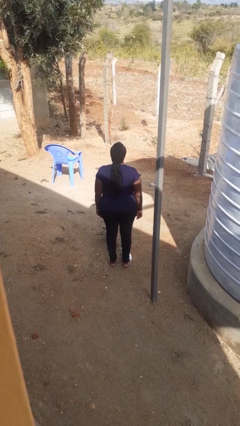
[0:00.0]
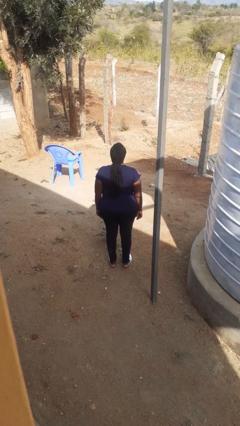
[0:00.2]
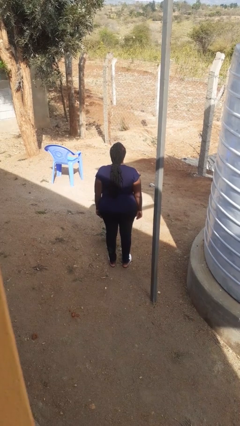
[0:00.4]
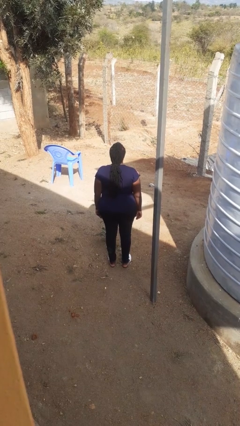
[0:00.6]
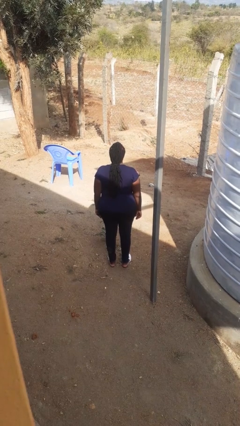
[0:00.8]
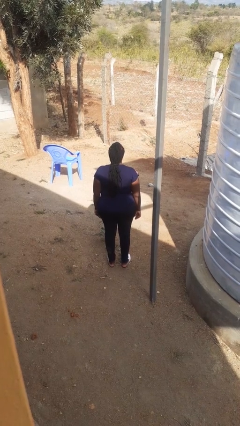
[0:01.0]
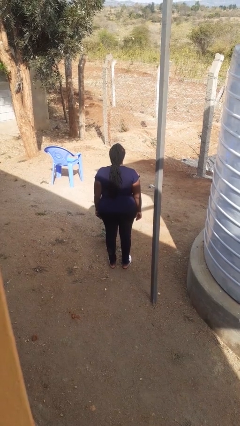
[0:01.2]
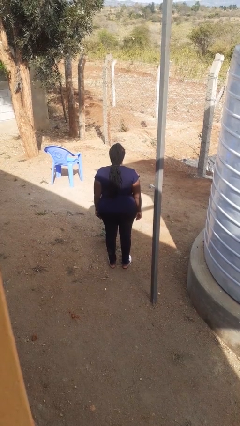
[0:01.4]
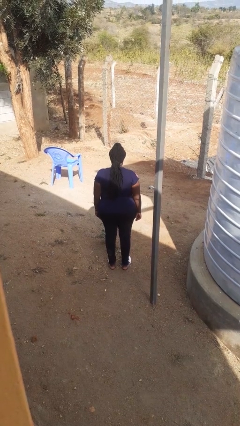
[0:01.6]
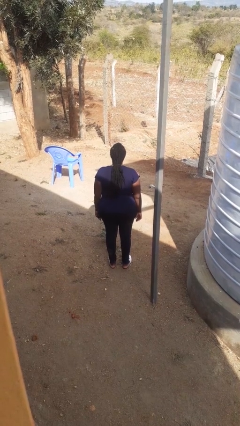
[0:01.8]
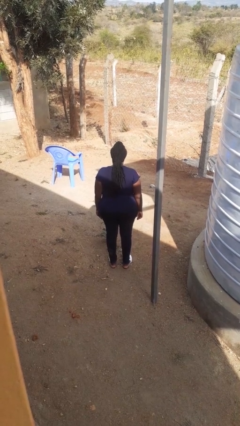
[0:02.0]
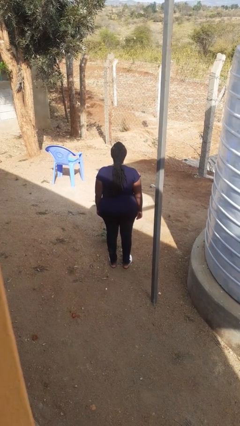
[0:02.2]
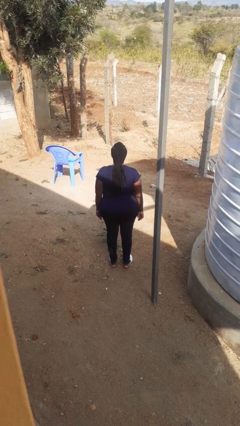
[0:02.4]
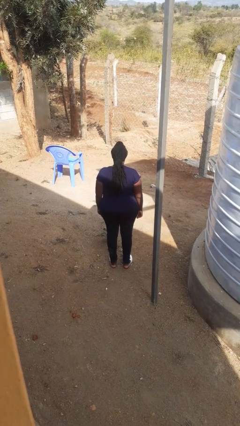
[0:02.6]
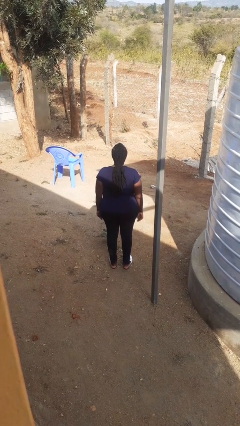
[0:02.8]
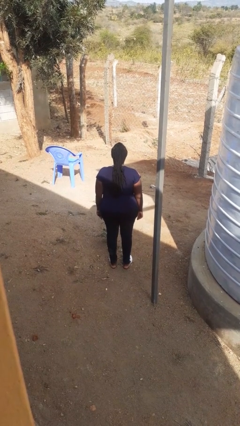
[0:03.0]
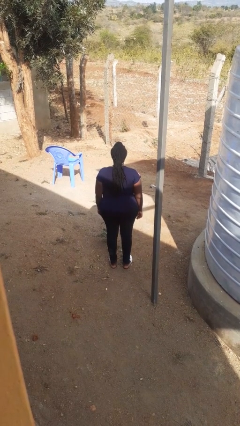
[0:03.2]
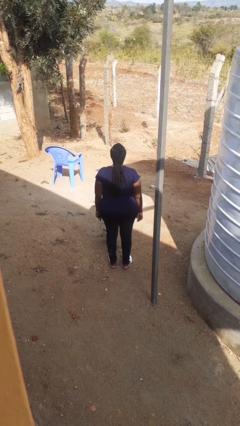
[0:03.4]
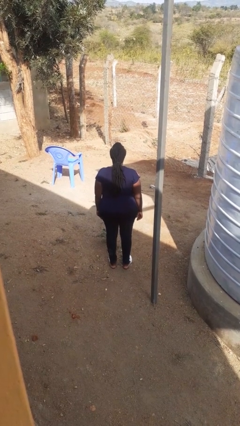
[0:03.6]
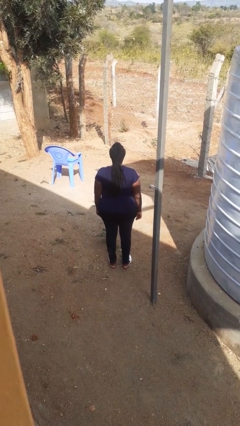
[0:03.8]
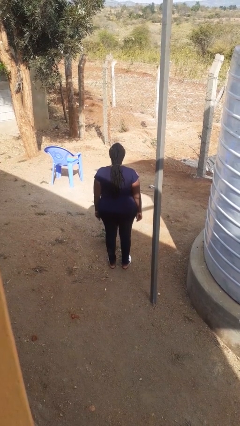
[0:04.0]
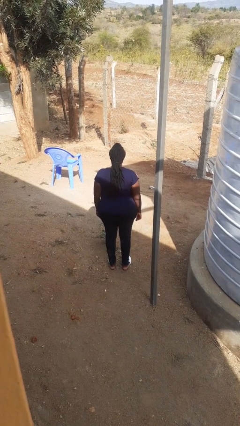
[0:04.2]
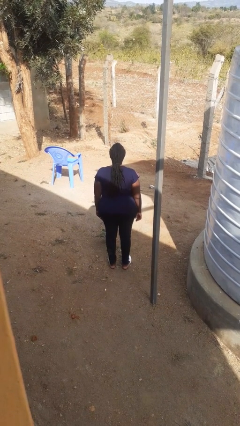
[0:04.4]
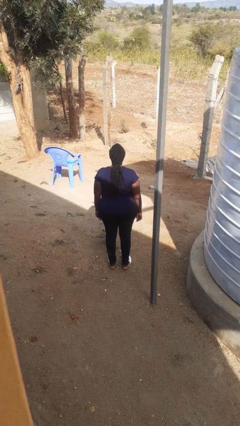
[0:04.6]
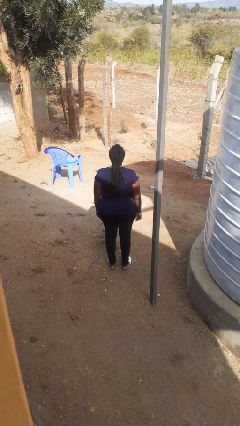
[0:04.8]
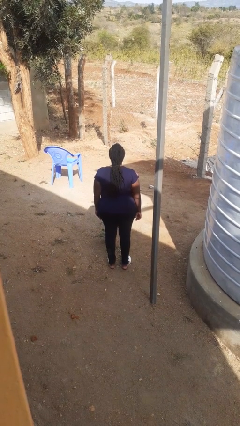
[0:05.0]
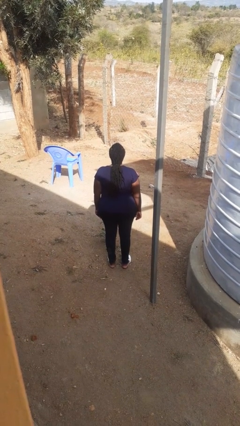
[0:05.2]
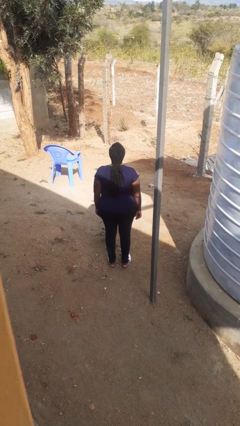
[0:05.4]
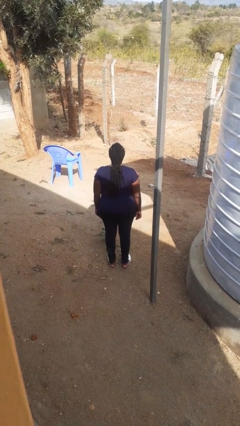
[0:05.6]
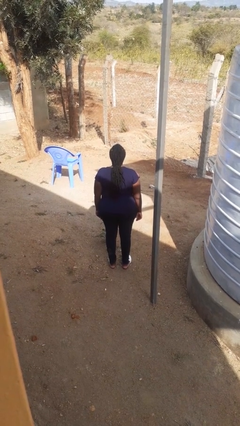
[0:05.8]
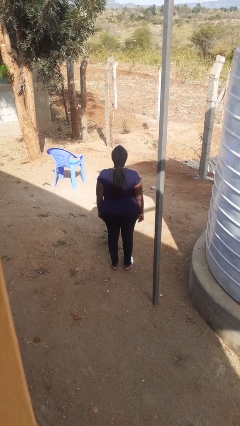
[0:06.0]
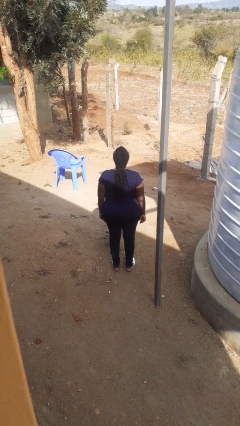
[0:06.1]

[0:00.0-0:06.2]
person nods head

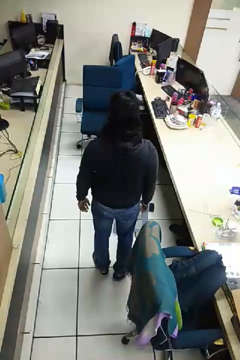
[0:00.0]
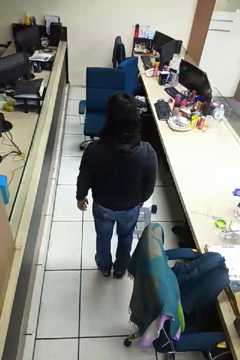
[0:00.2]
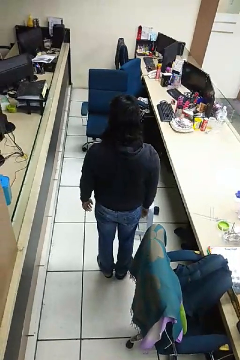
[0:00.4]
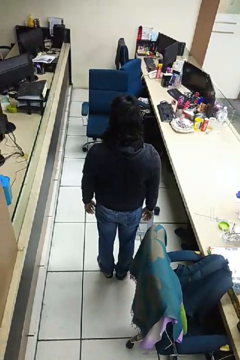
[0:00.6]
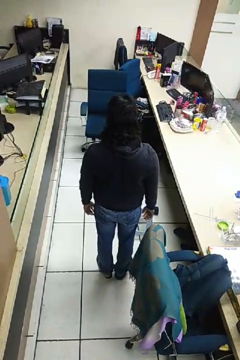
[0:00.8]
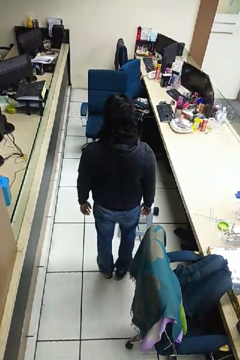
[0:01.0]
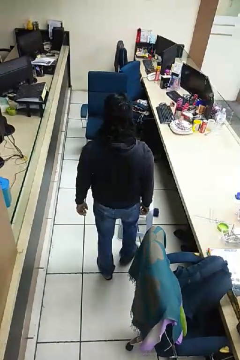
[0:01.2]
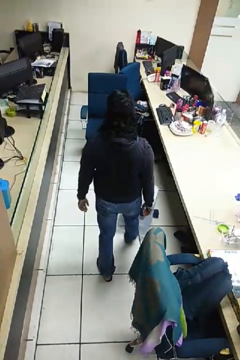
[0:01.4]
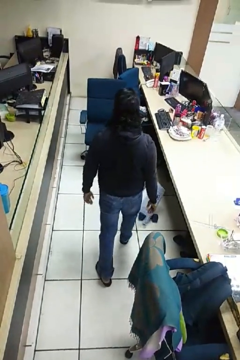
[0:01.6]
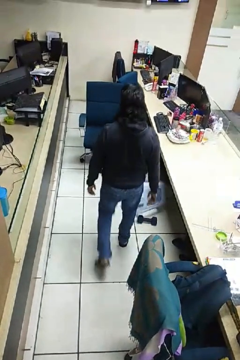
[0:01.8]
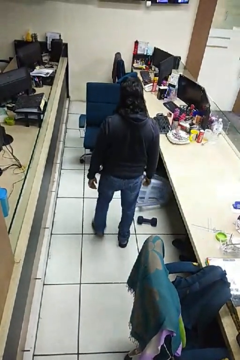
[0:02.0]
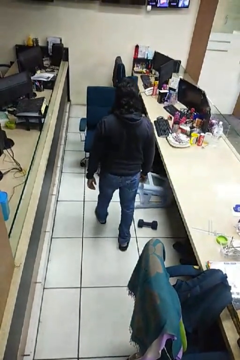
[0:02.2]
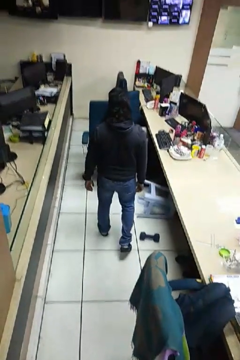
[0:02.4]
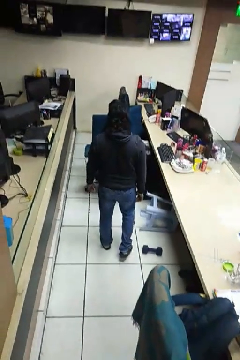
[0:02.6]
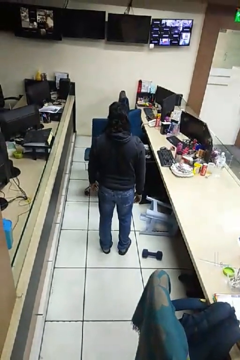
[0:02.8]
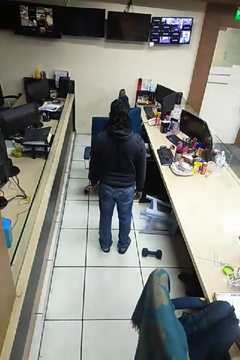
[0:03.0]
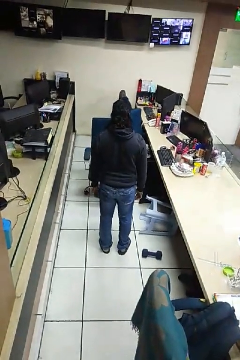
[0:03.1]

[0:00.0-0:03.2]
person knocks over furniture

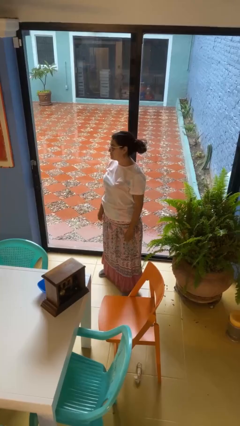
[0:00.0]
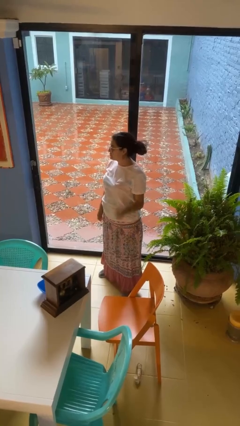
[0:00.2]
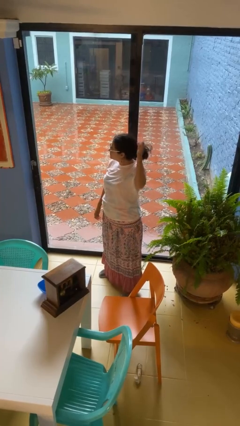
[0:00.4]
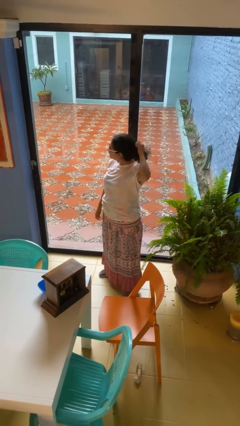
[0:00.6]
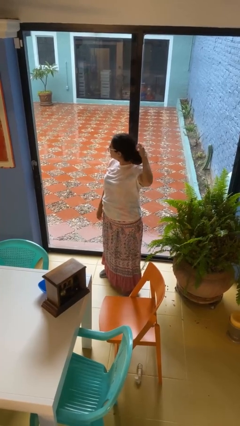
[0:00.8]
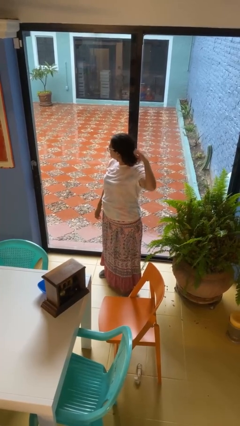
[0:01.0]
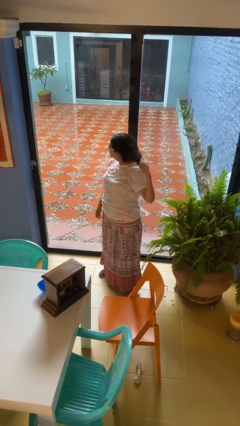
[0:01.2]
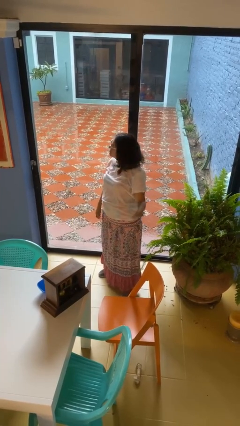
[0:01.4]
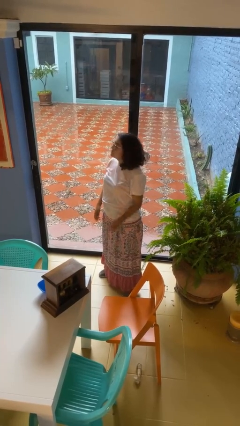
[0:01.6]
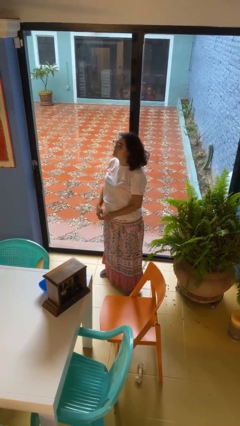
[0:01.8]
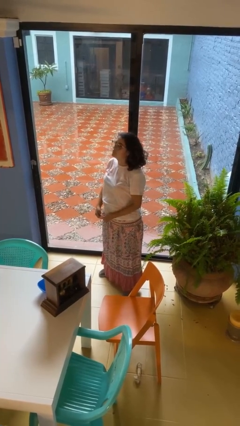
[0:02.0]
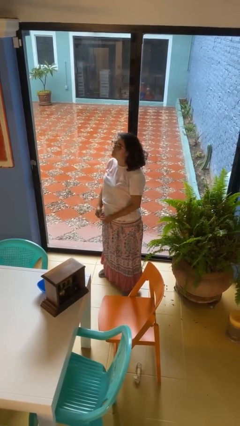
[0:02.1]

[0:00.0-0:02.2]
person takes off hairtie

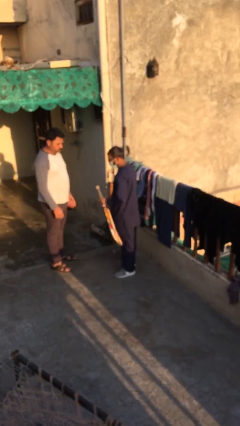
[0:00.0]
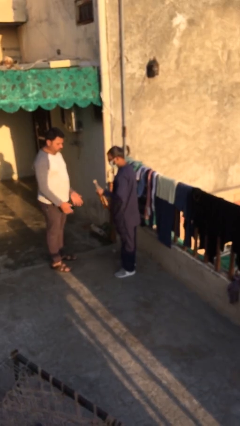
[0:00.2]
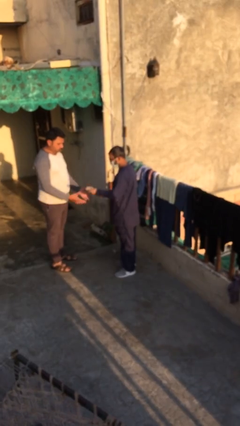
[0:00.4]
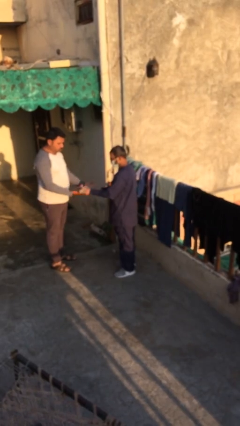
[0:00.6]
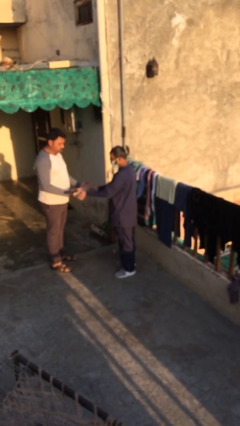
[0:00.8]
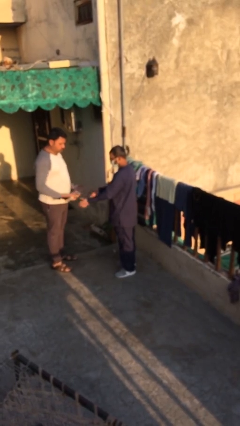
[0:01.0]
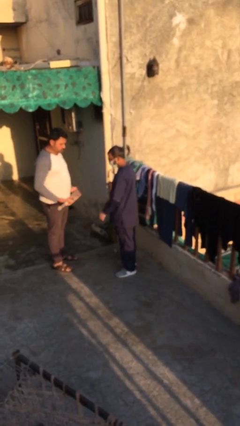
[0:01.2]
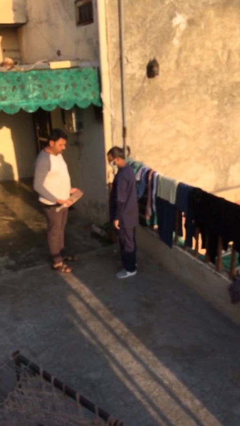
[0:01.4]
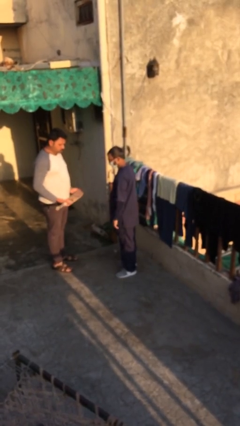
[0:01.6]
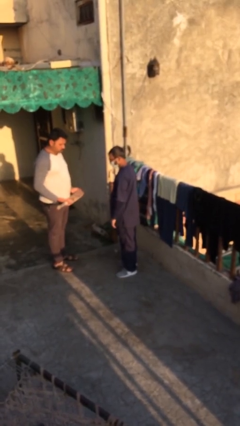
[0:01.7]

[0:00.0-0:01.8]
person transfers object to person

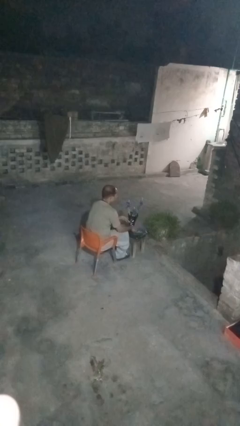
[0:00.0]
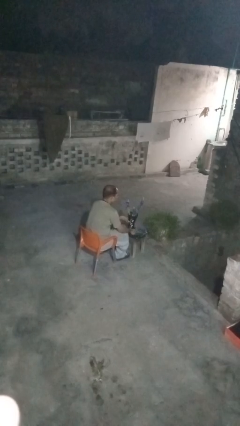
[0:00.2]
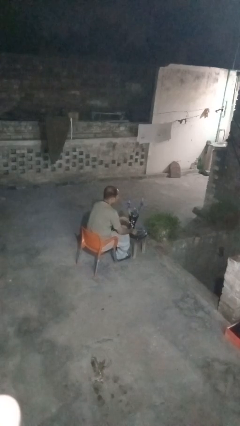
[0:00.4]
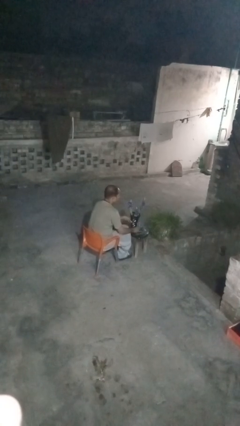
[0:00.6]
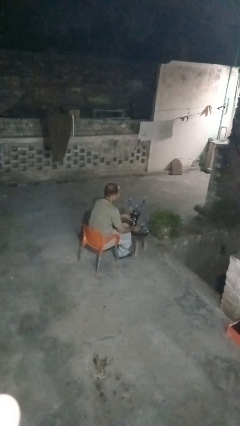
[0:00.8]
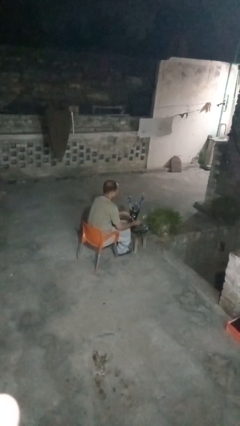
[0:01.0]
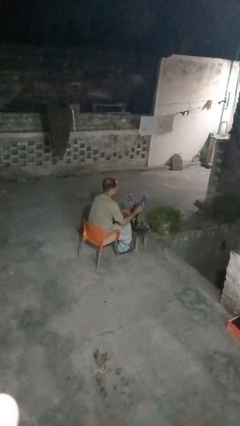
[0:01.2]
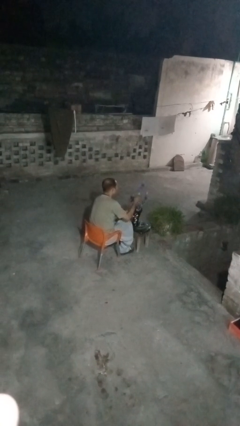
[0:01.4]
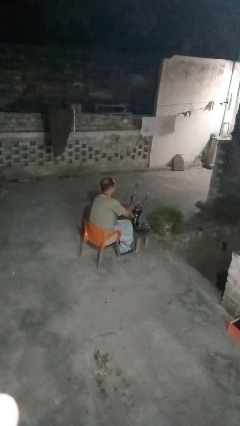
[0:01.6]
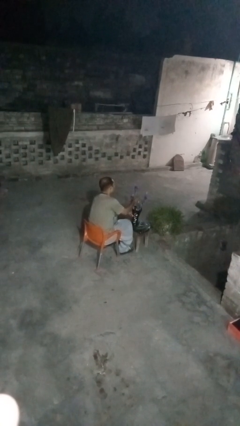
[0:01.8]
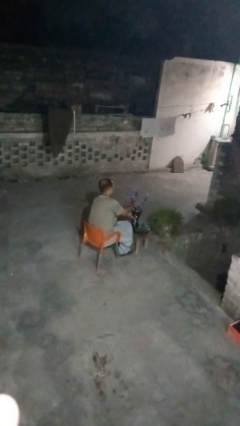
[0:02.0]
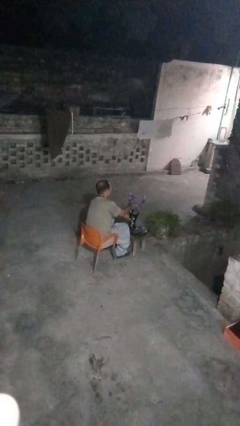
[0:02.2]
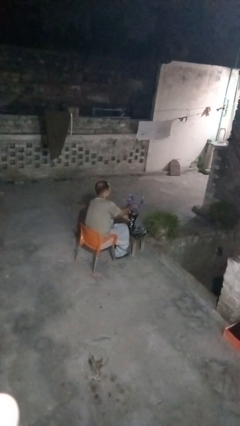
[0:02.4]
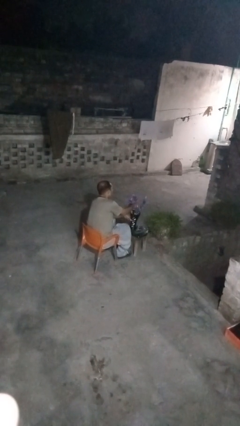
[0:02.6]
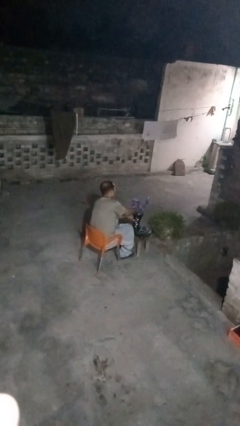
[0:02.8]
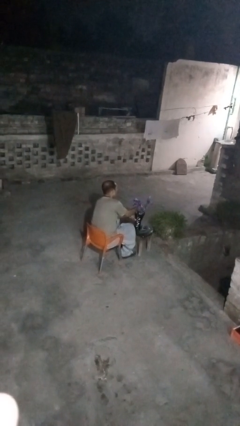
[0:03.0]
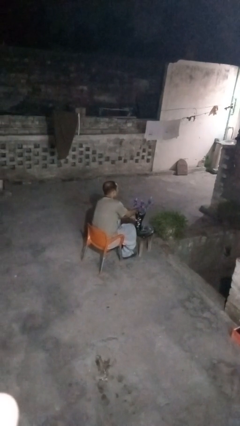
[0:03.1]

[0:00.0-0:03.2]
person arranges flowers in vase

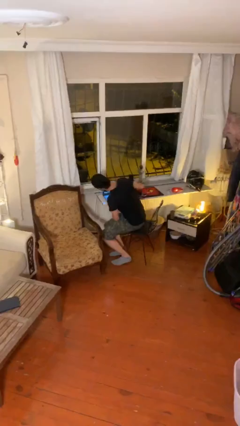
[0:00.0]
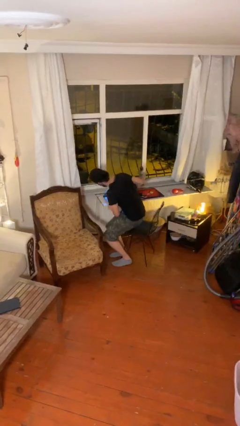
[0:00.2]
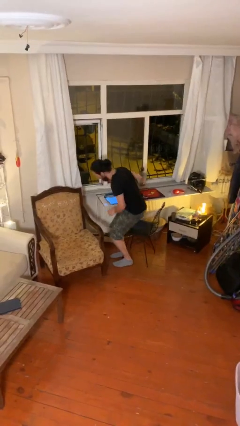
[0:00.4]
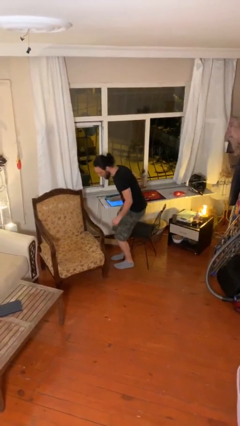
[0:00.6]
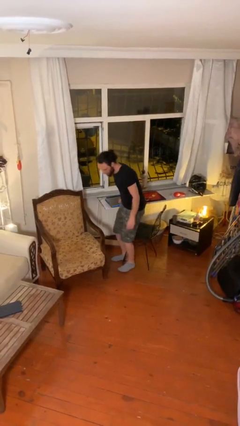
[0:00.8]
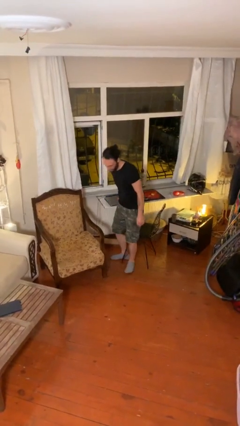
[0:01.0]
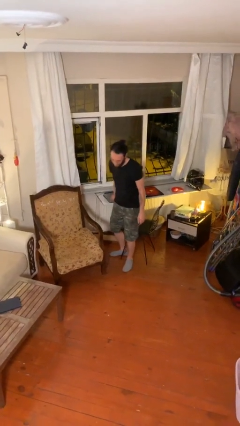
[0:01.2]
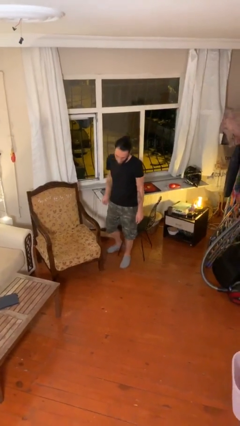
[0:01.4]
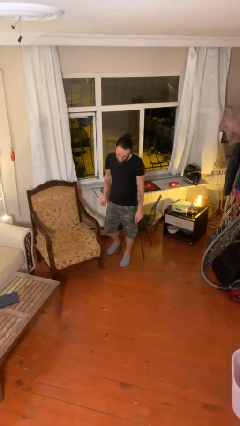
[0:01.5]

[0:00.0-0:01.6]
person stands up
